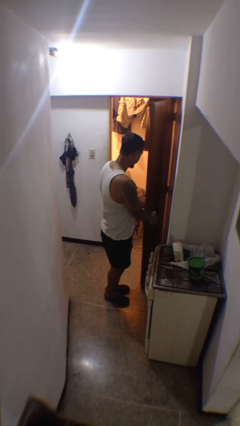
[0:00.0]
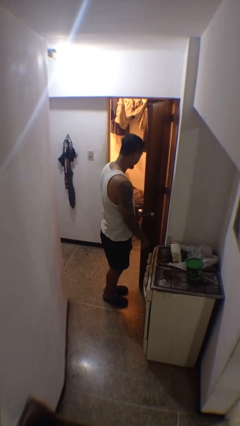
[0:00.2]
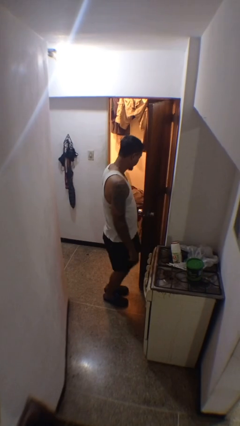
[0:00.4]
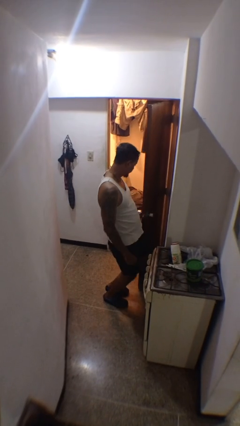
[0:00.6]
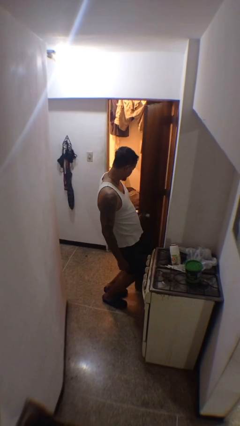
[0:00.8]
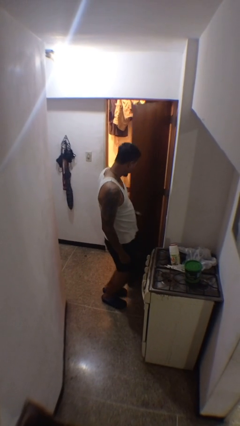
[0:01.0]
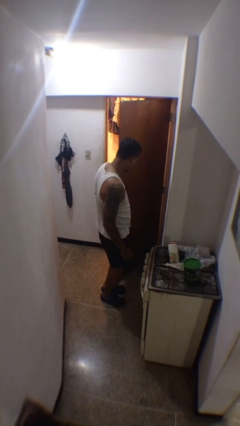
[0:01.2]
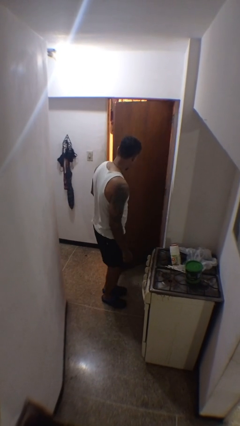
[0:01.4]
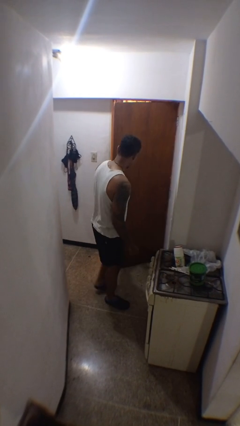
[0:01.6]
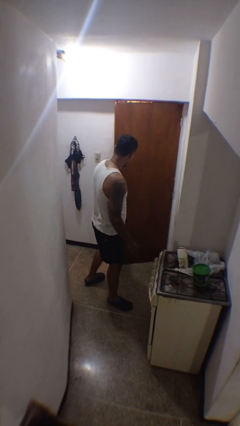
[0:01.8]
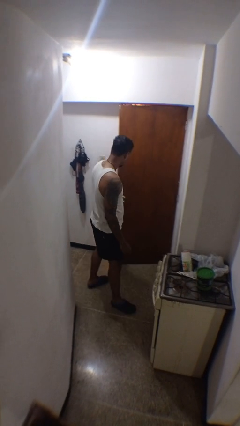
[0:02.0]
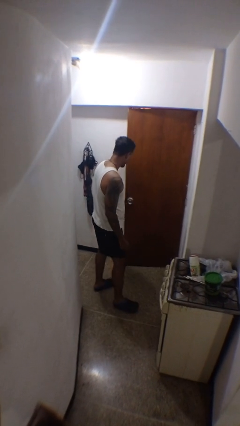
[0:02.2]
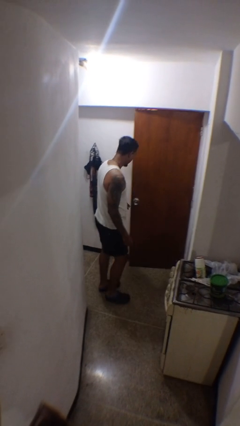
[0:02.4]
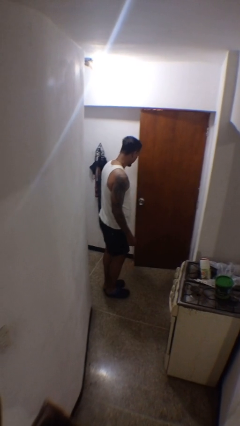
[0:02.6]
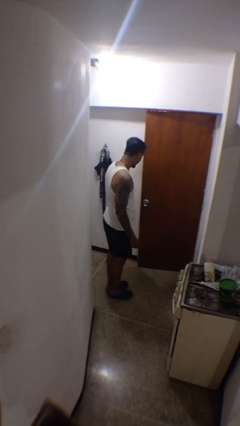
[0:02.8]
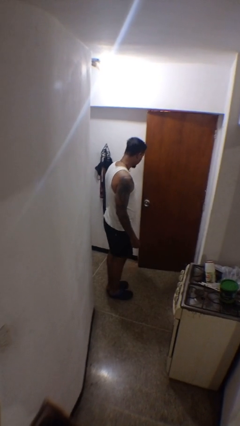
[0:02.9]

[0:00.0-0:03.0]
person closes door with hip

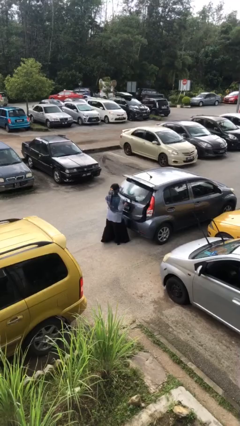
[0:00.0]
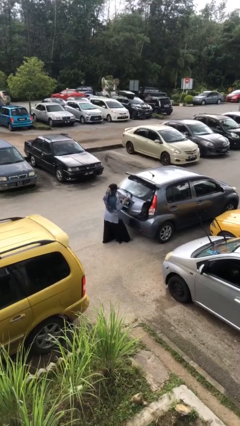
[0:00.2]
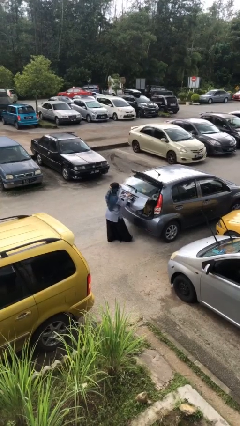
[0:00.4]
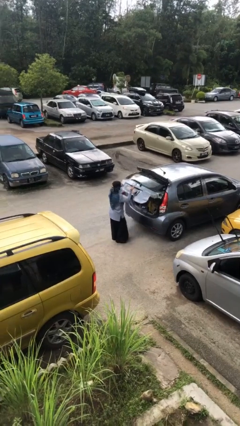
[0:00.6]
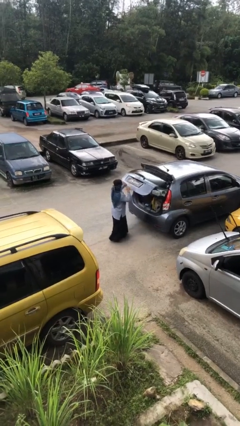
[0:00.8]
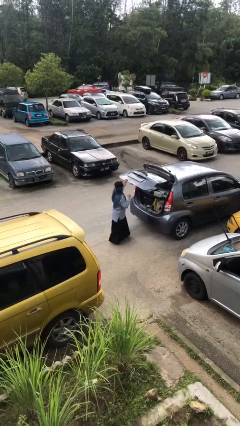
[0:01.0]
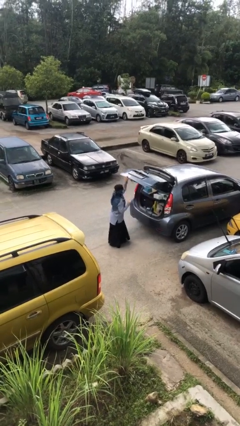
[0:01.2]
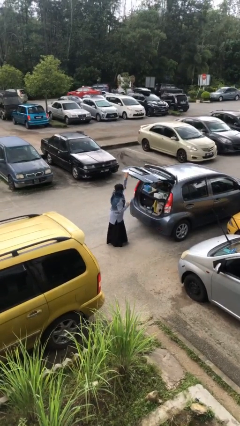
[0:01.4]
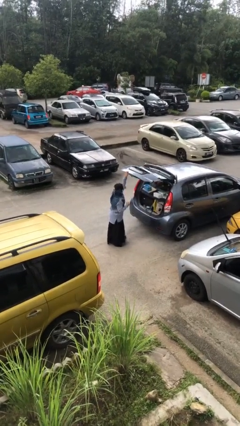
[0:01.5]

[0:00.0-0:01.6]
person opens car trunk

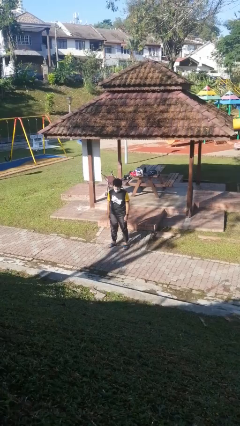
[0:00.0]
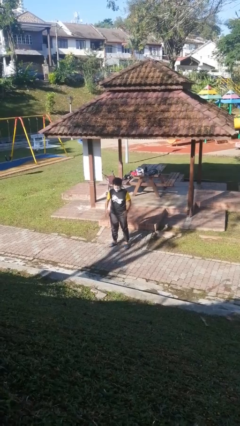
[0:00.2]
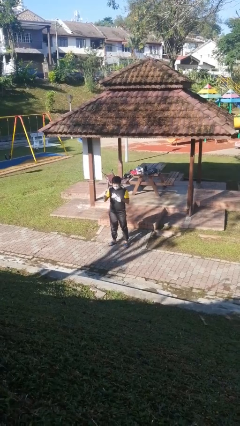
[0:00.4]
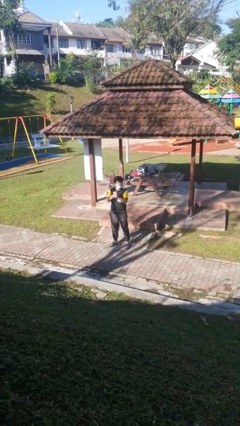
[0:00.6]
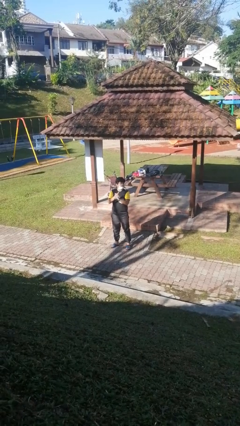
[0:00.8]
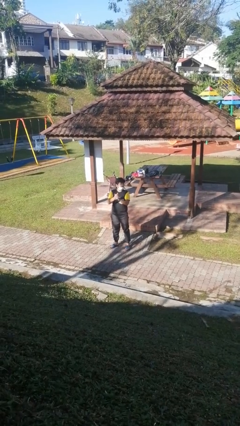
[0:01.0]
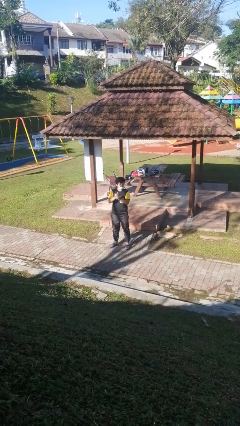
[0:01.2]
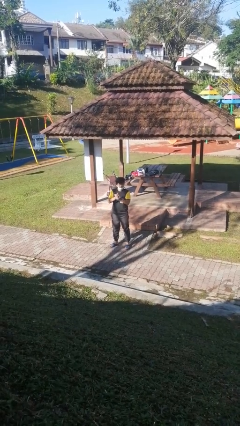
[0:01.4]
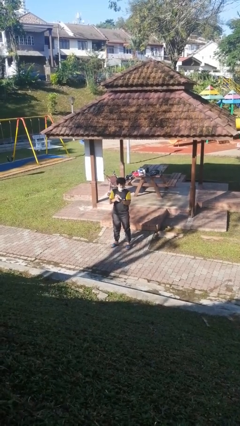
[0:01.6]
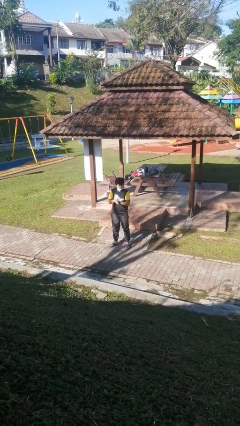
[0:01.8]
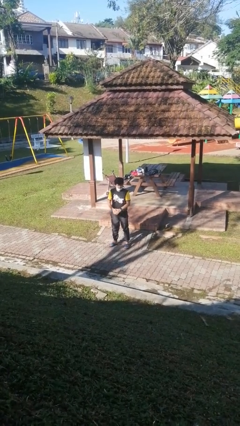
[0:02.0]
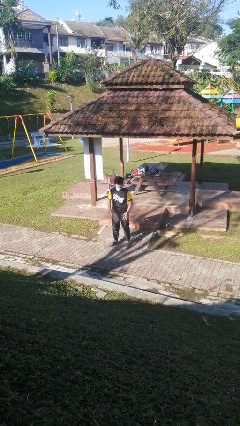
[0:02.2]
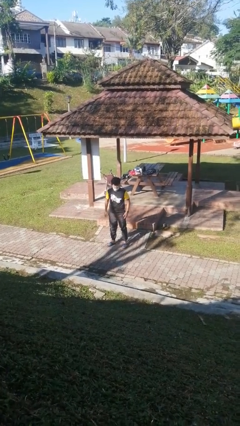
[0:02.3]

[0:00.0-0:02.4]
person claps hands

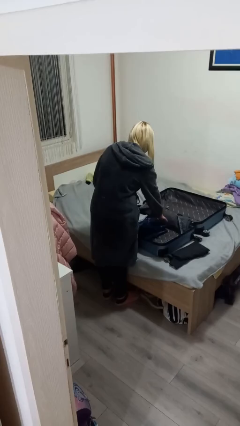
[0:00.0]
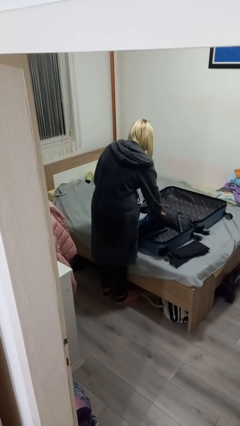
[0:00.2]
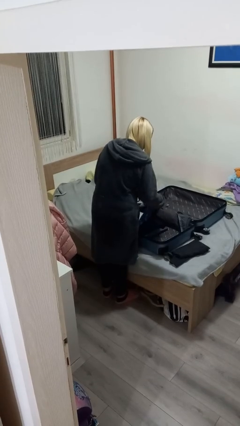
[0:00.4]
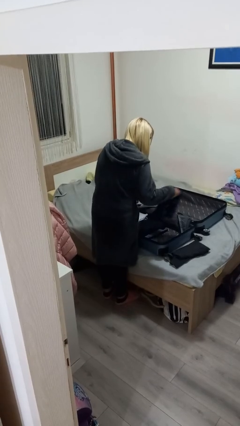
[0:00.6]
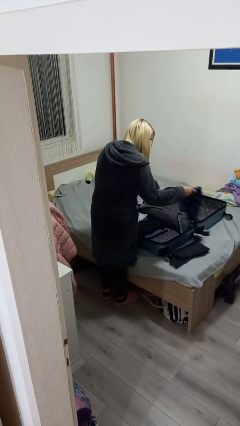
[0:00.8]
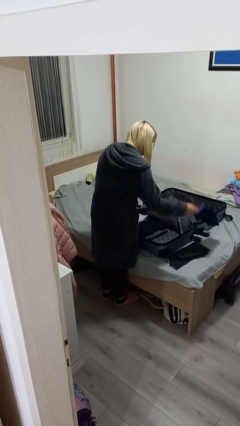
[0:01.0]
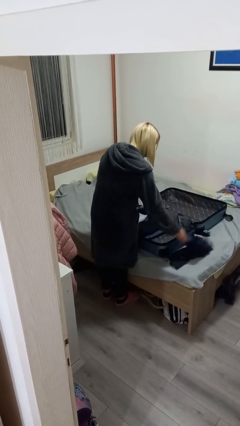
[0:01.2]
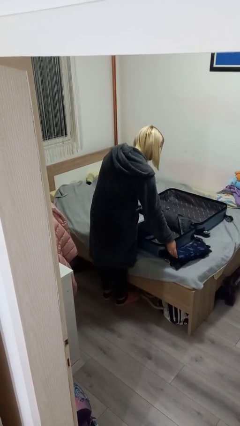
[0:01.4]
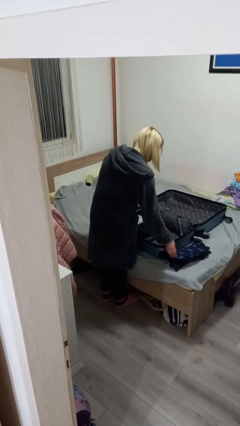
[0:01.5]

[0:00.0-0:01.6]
person unloads clothes from suitcase

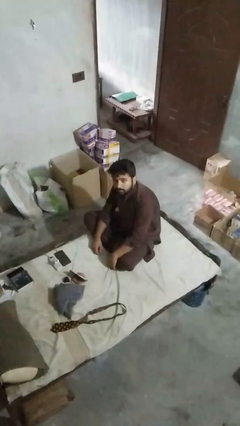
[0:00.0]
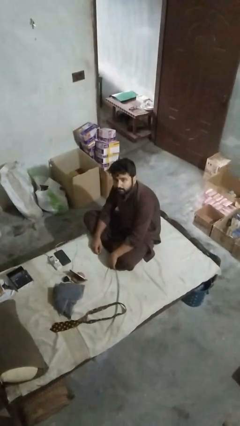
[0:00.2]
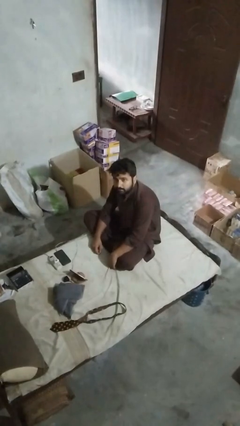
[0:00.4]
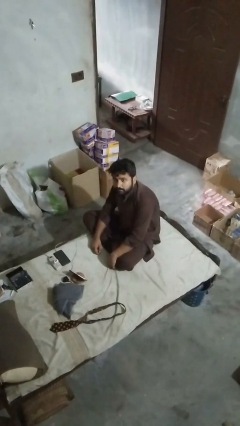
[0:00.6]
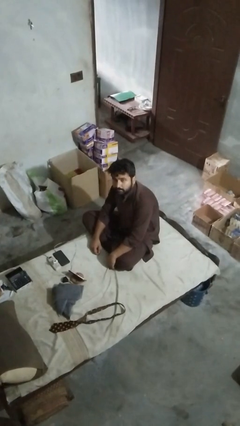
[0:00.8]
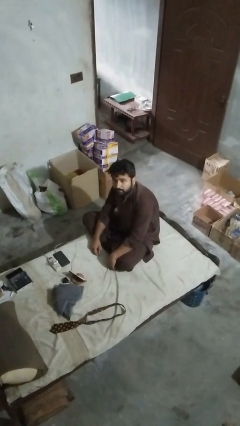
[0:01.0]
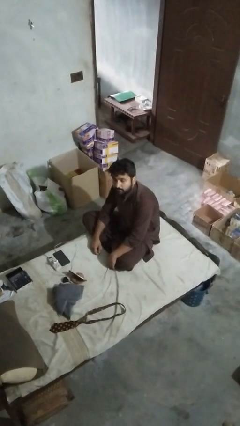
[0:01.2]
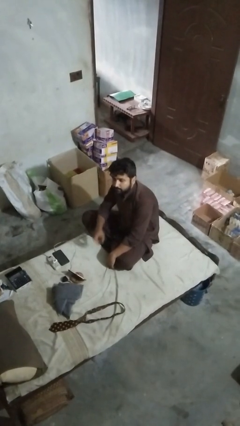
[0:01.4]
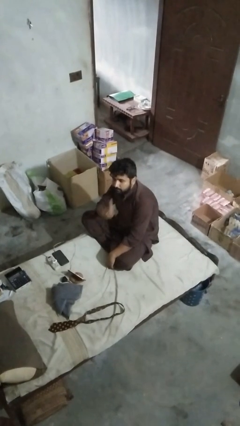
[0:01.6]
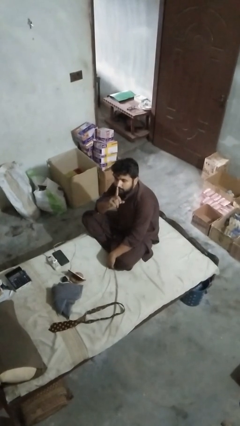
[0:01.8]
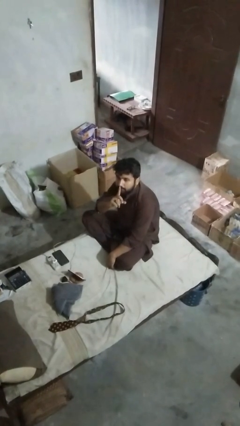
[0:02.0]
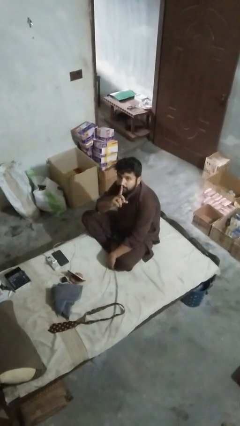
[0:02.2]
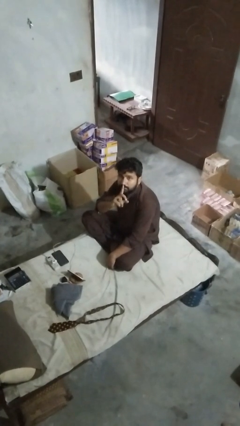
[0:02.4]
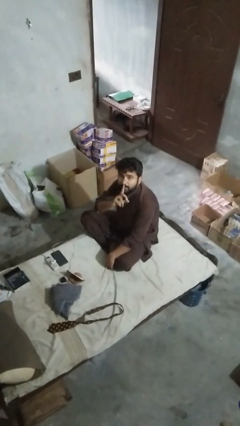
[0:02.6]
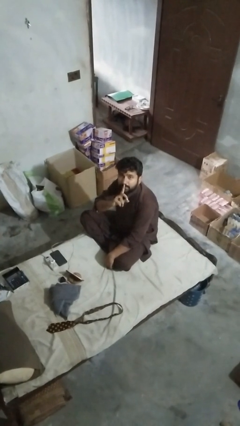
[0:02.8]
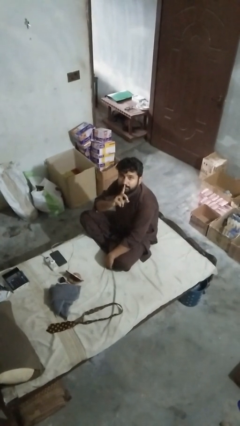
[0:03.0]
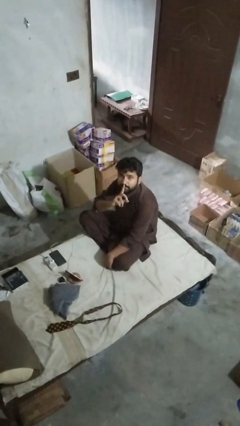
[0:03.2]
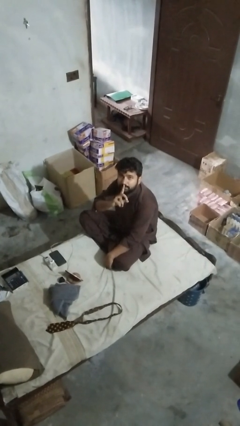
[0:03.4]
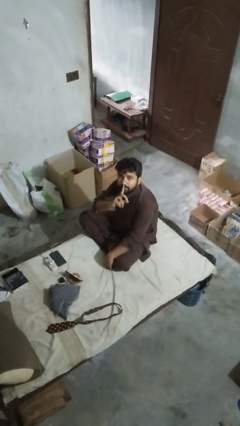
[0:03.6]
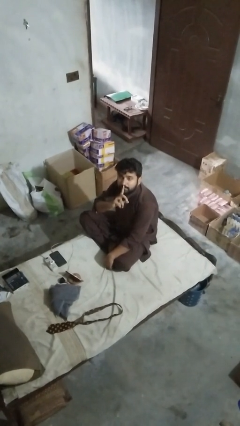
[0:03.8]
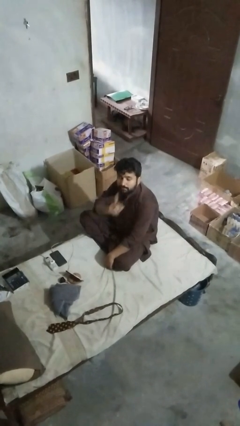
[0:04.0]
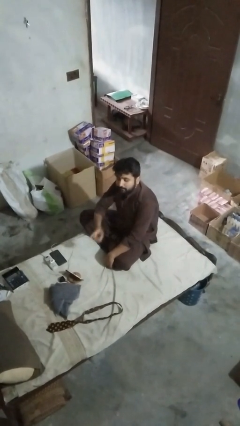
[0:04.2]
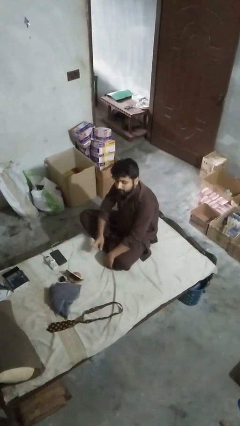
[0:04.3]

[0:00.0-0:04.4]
person gestures be quiet

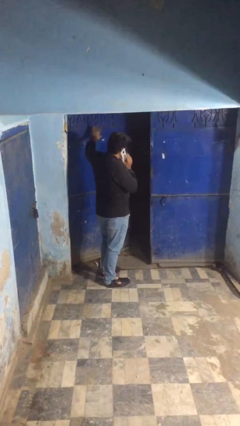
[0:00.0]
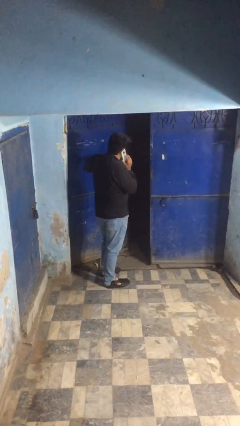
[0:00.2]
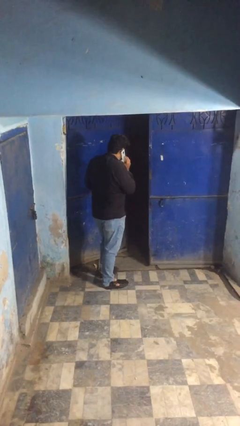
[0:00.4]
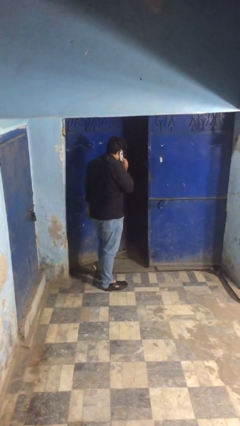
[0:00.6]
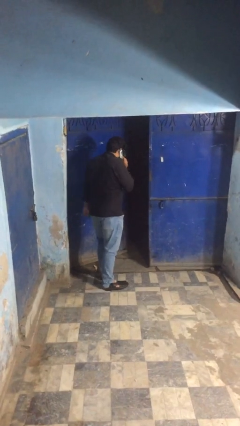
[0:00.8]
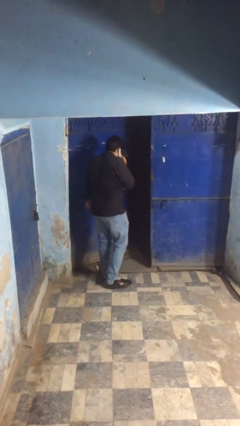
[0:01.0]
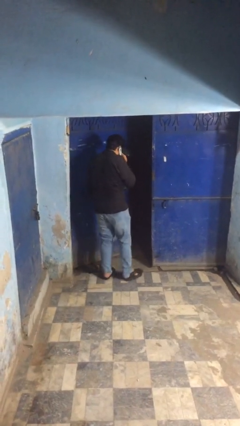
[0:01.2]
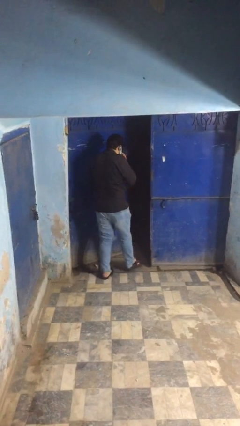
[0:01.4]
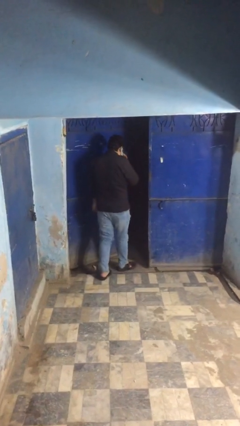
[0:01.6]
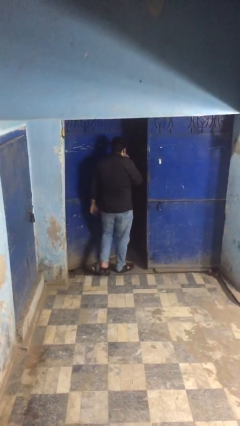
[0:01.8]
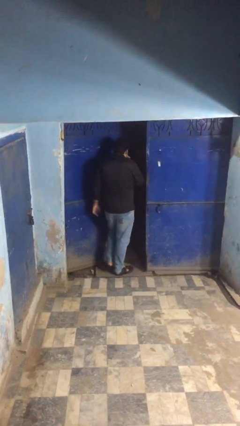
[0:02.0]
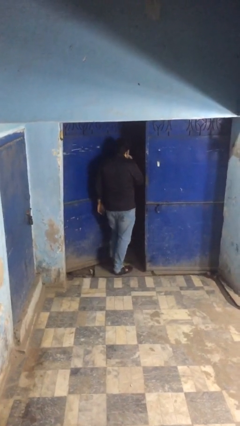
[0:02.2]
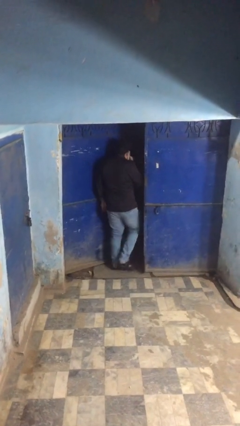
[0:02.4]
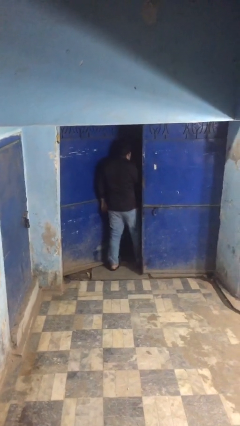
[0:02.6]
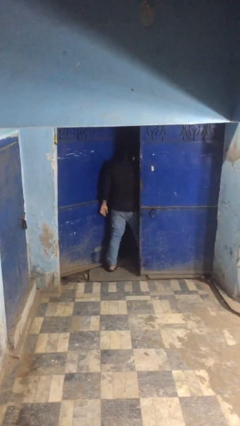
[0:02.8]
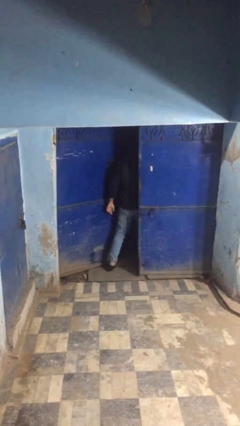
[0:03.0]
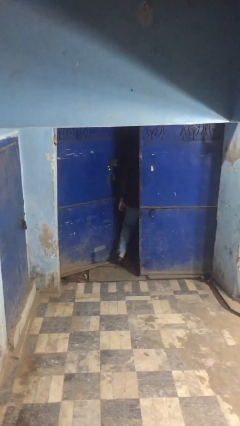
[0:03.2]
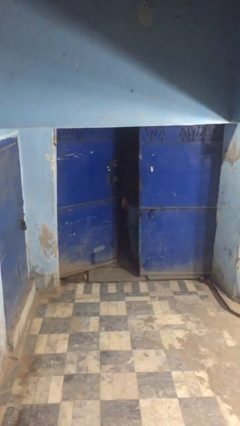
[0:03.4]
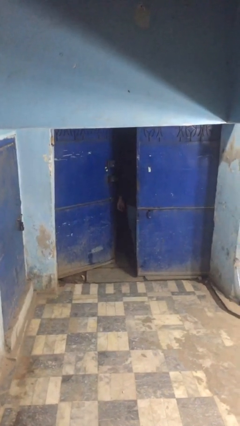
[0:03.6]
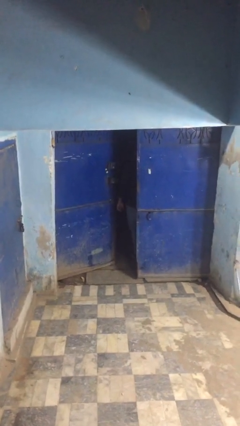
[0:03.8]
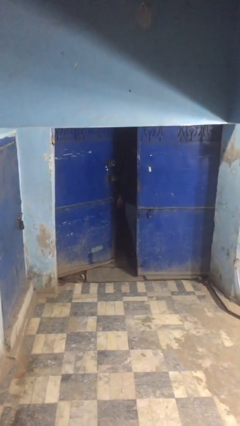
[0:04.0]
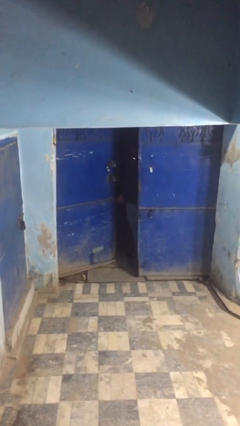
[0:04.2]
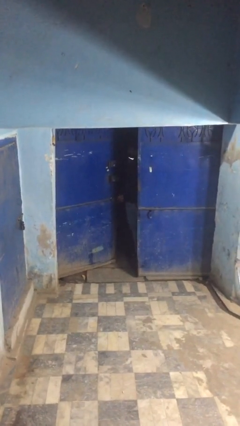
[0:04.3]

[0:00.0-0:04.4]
person exits scene through structure
